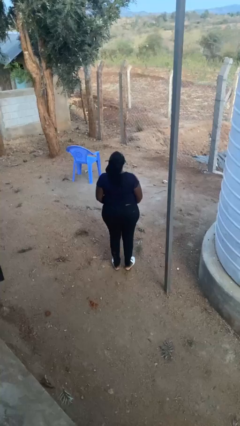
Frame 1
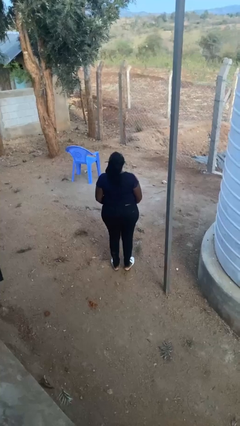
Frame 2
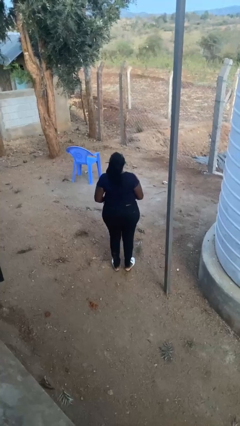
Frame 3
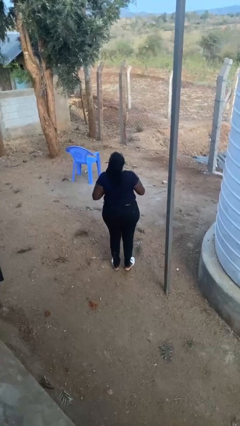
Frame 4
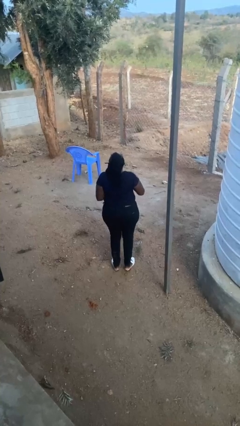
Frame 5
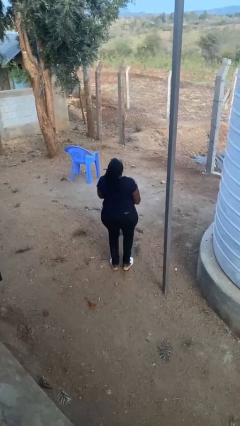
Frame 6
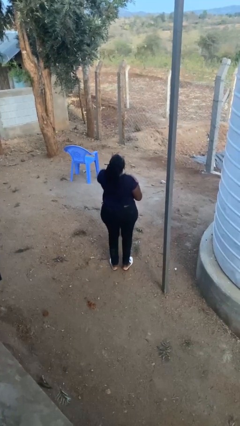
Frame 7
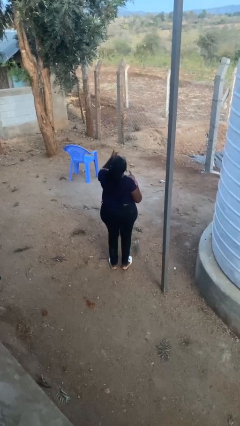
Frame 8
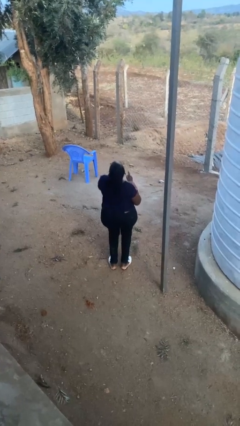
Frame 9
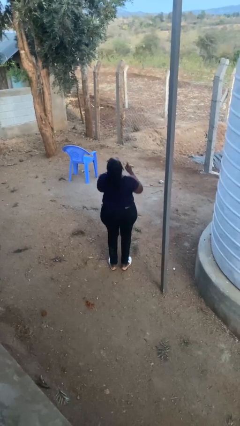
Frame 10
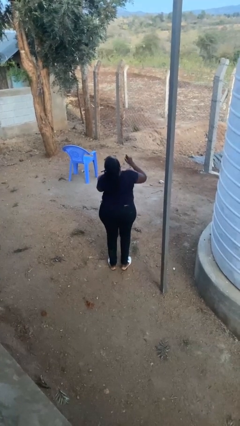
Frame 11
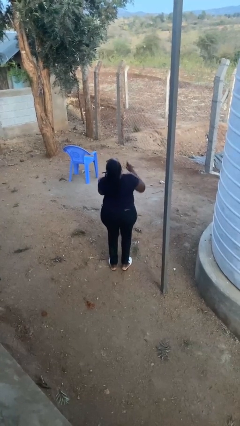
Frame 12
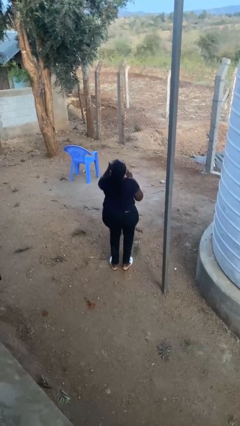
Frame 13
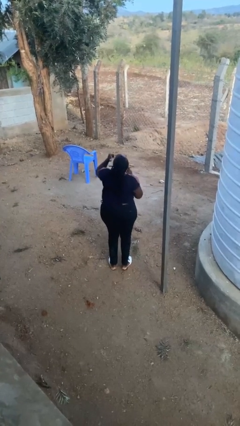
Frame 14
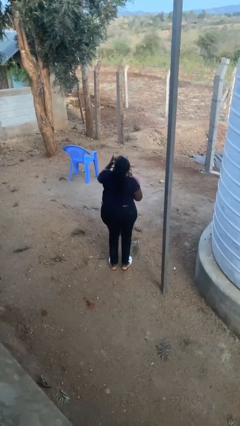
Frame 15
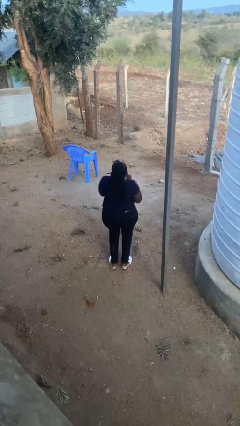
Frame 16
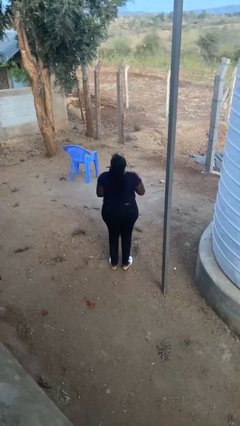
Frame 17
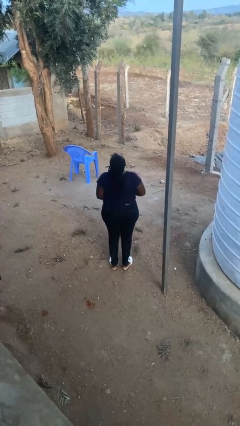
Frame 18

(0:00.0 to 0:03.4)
person dances in place

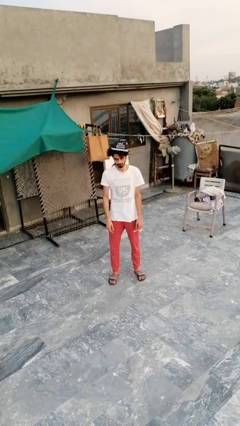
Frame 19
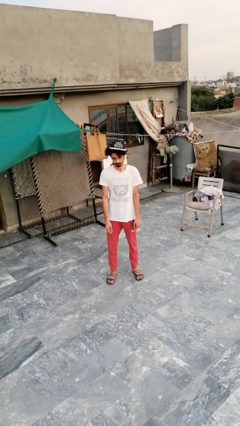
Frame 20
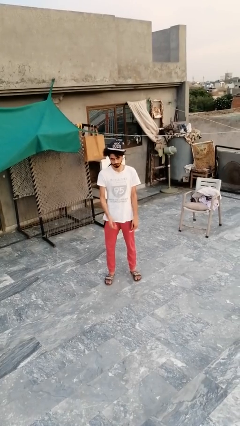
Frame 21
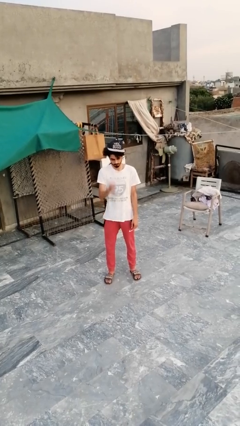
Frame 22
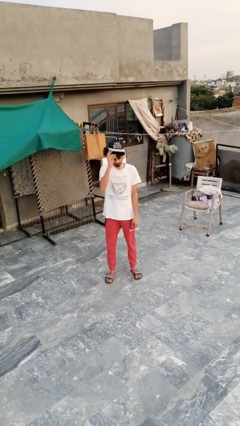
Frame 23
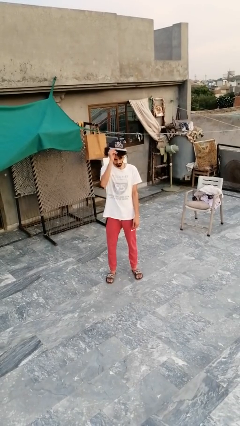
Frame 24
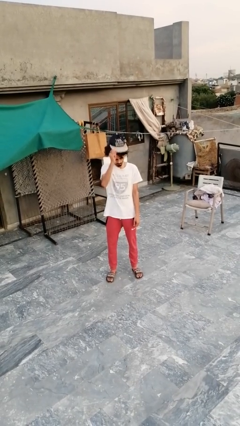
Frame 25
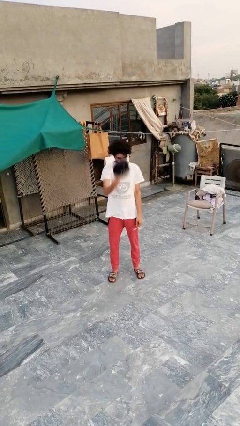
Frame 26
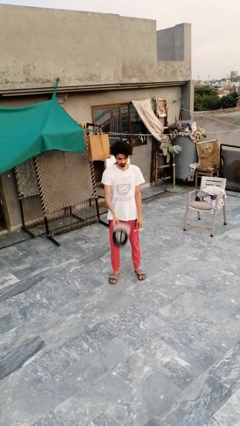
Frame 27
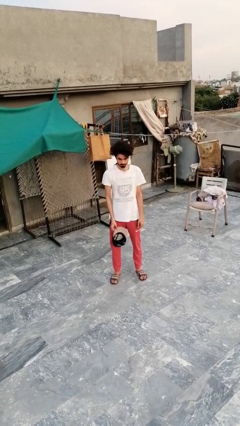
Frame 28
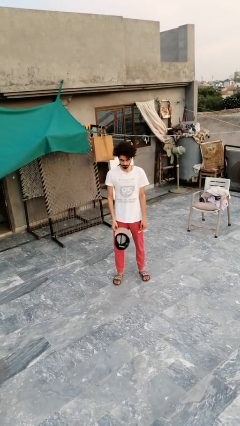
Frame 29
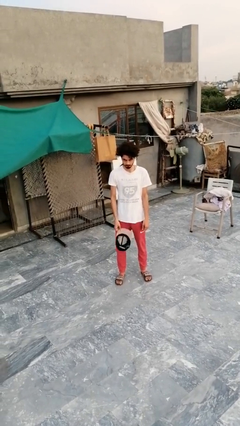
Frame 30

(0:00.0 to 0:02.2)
person takes off hat

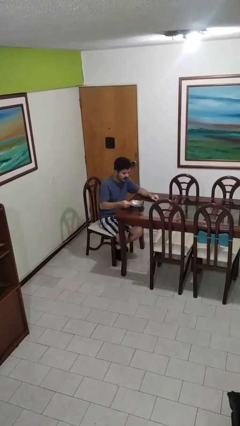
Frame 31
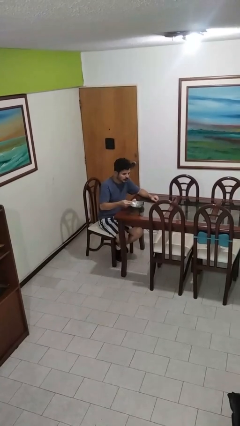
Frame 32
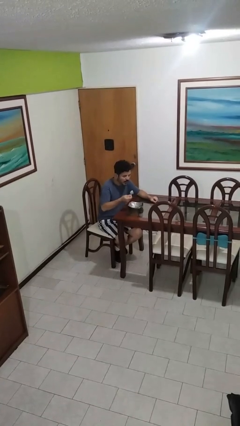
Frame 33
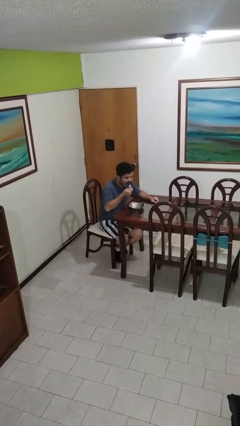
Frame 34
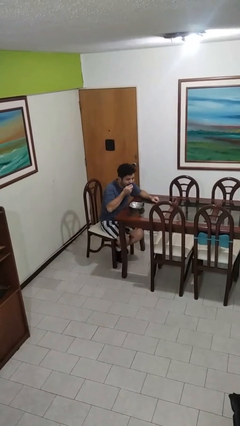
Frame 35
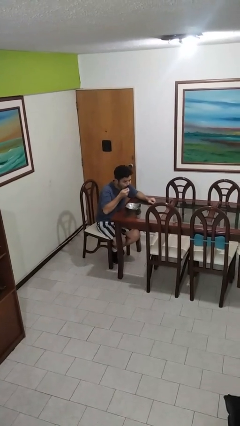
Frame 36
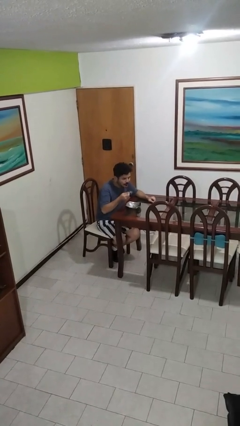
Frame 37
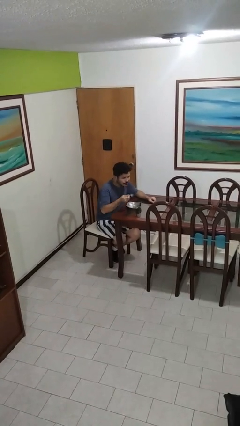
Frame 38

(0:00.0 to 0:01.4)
person eats with utensil

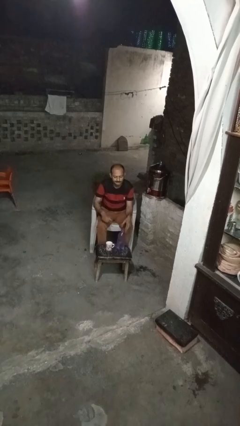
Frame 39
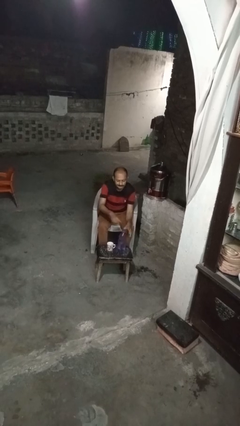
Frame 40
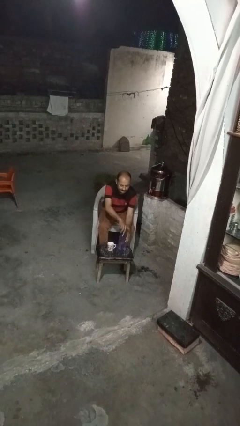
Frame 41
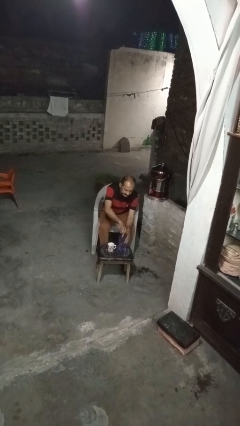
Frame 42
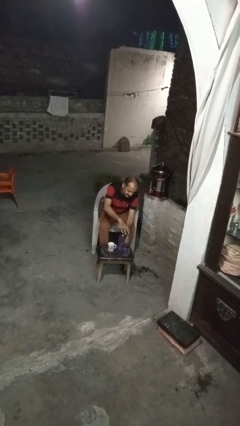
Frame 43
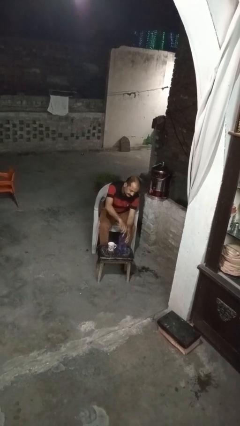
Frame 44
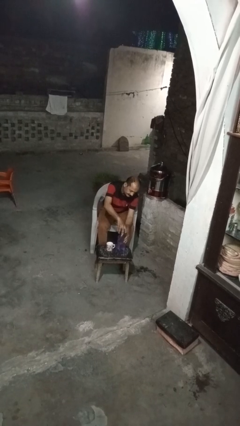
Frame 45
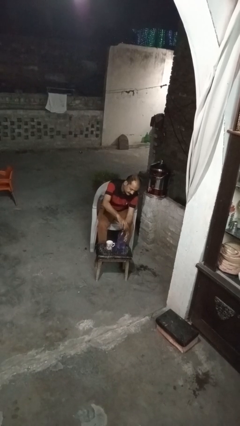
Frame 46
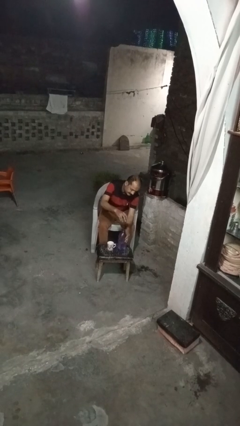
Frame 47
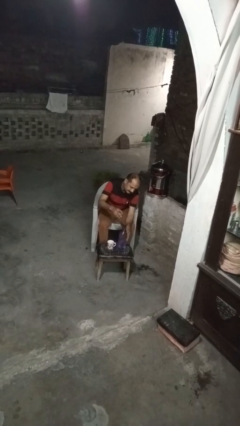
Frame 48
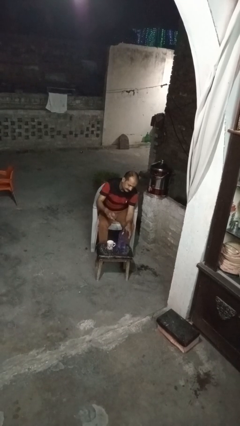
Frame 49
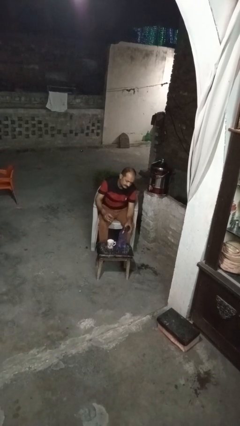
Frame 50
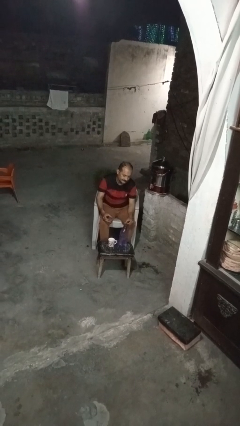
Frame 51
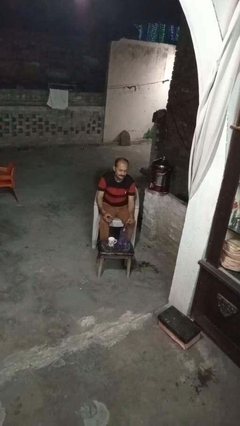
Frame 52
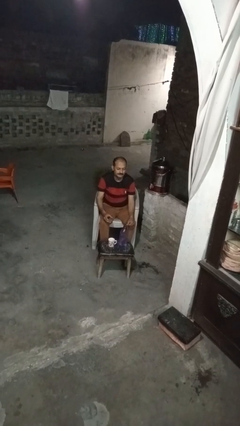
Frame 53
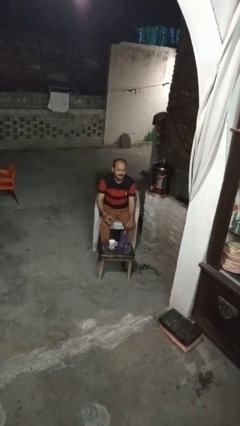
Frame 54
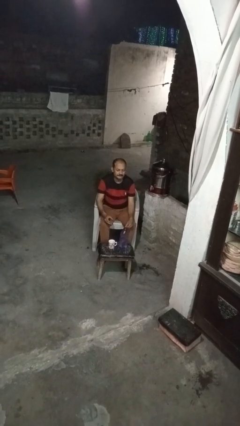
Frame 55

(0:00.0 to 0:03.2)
person unscrews lid from bottle

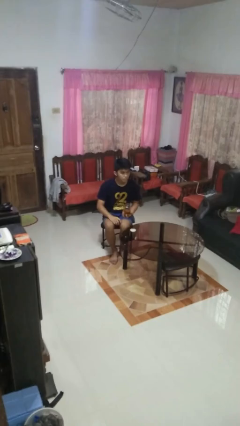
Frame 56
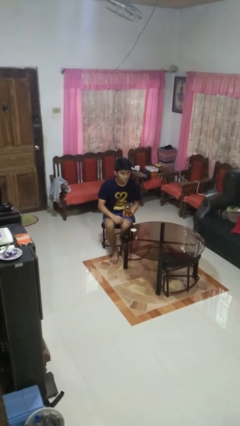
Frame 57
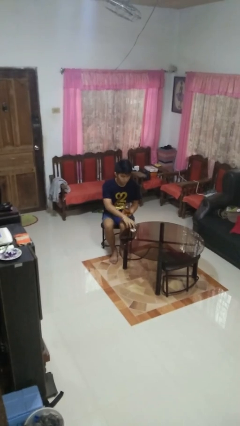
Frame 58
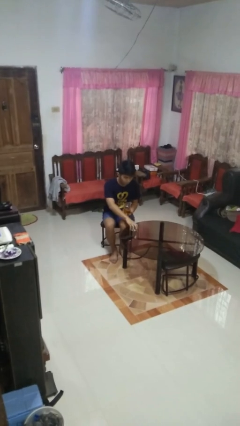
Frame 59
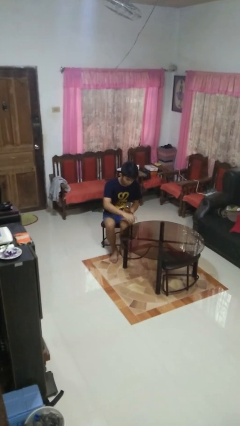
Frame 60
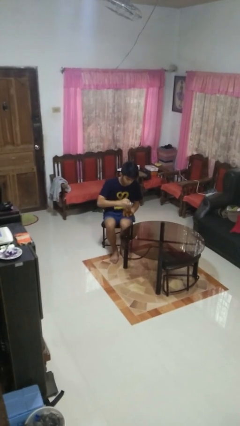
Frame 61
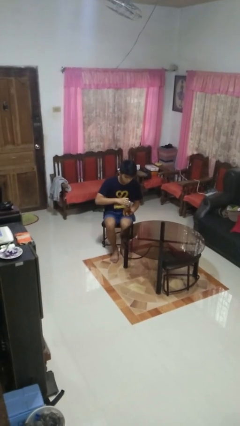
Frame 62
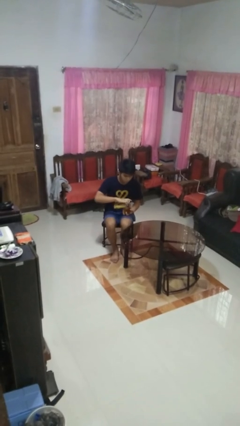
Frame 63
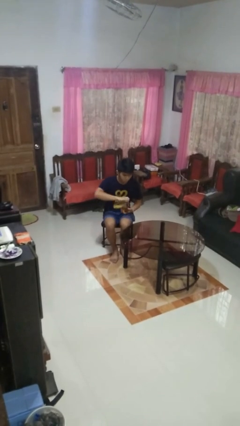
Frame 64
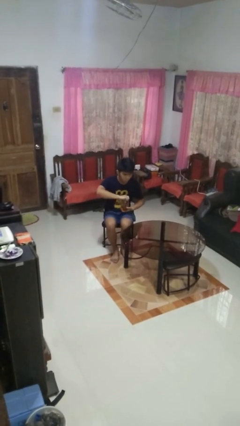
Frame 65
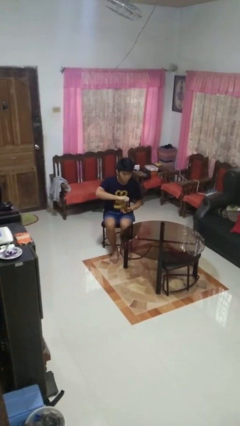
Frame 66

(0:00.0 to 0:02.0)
person closes jar

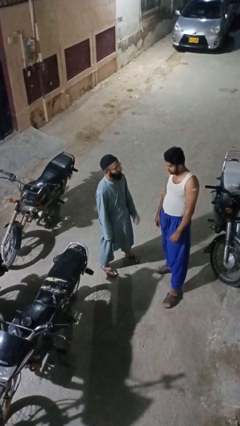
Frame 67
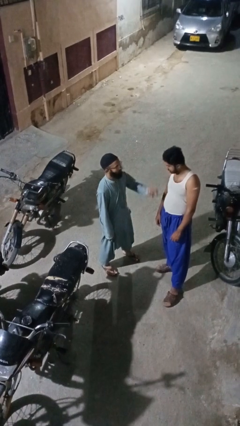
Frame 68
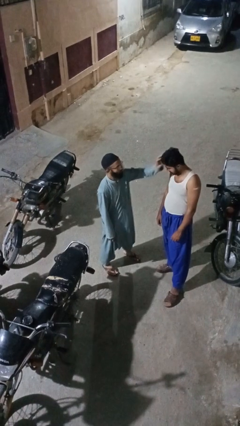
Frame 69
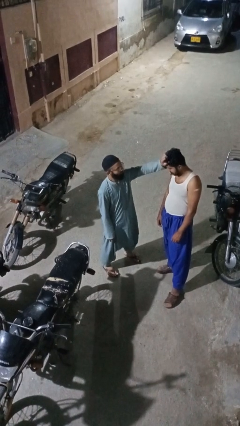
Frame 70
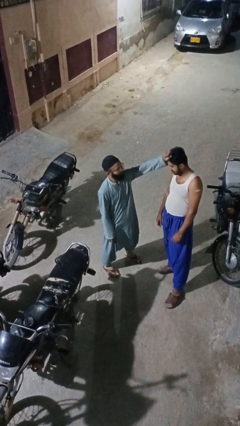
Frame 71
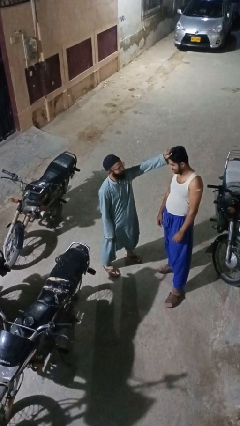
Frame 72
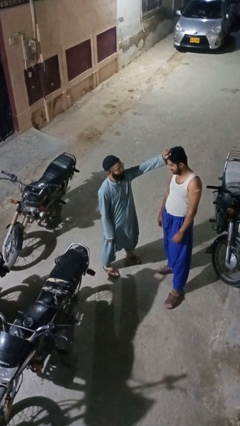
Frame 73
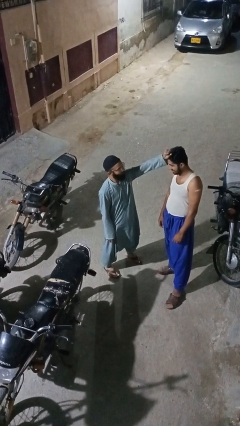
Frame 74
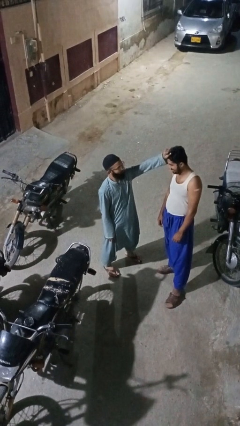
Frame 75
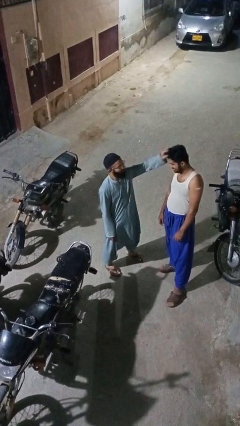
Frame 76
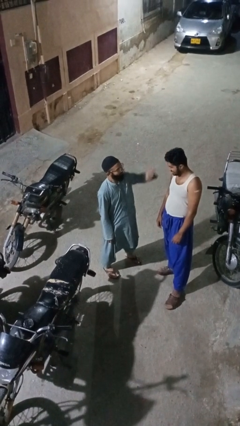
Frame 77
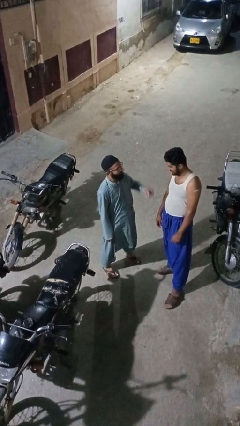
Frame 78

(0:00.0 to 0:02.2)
person grabs person by hair

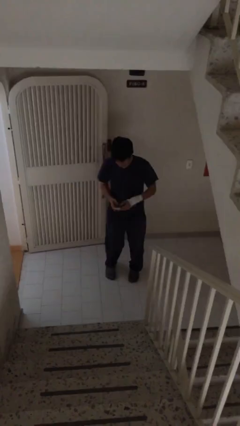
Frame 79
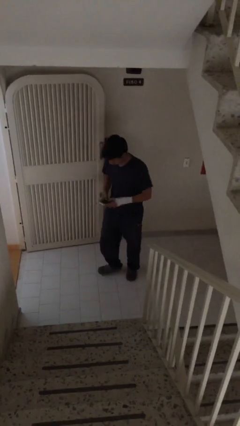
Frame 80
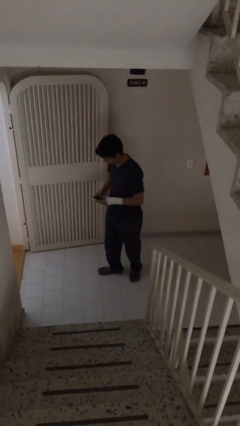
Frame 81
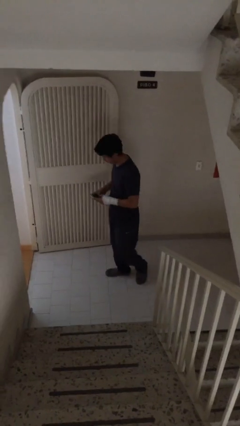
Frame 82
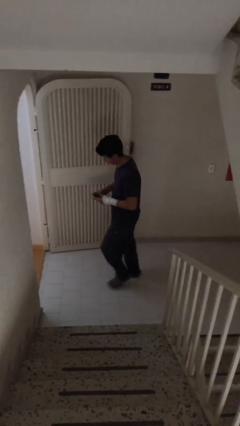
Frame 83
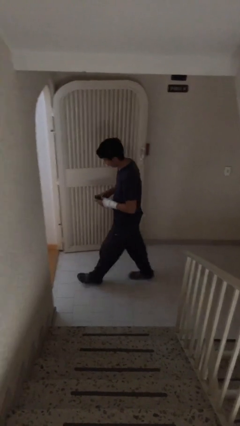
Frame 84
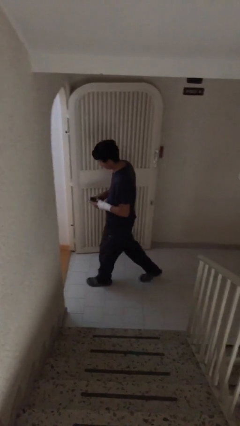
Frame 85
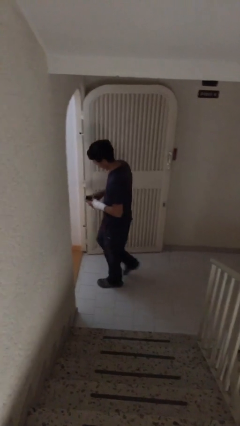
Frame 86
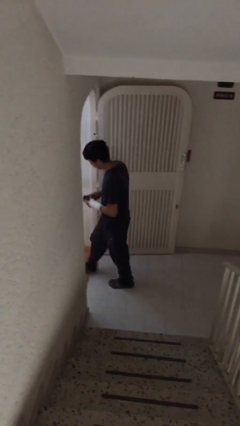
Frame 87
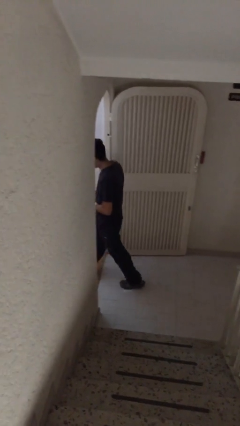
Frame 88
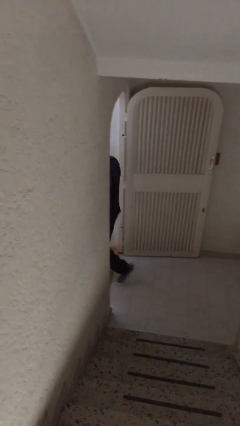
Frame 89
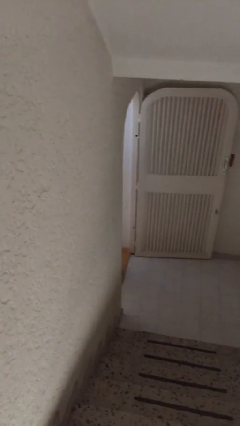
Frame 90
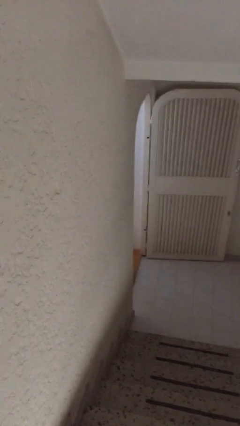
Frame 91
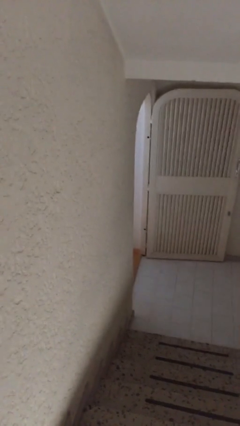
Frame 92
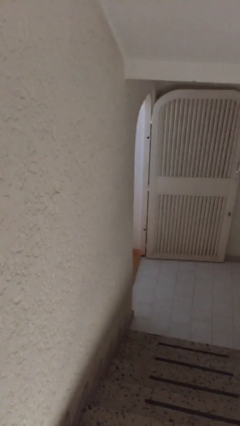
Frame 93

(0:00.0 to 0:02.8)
person exits scene through structure
